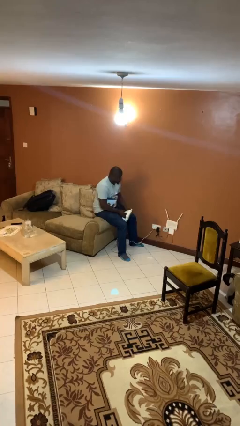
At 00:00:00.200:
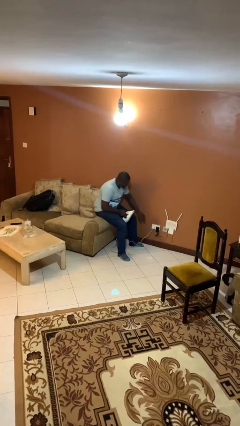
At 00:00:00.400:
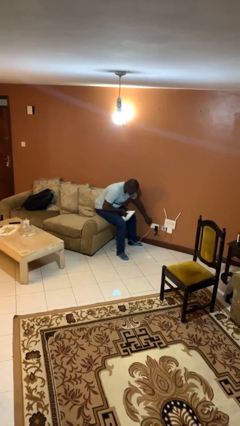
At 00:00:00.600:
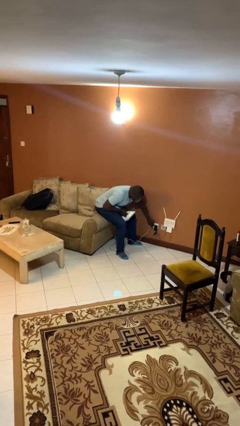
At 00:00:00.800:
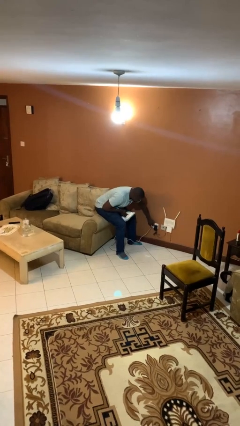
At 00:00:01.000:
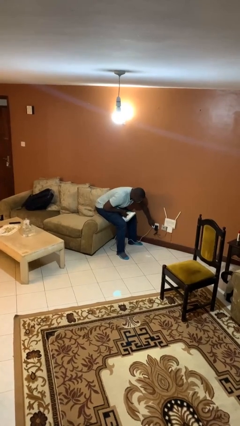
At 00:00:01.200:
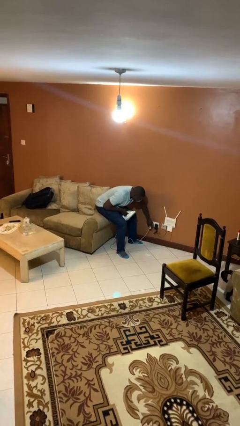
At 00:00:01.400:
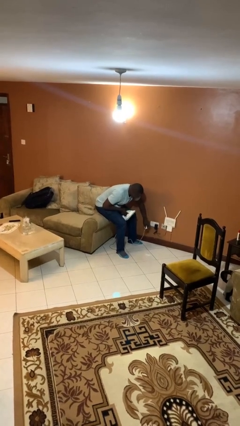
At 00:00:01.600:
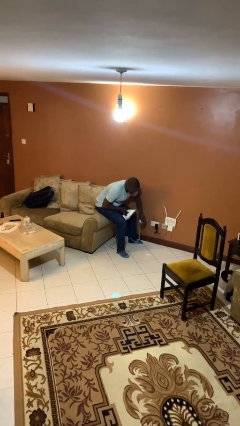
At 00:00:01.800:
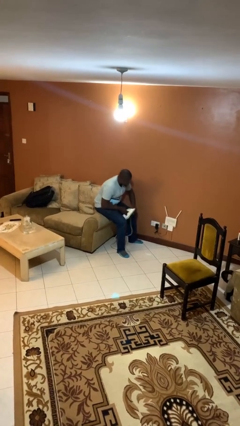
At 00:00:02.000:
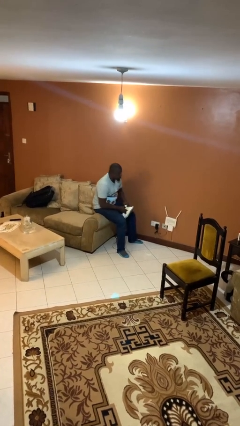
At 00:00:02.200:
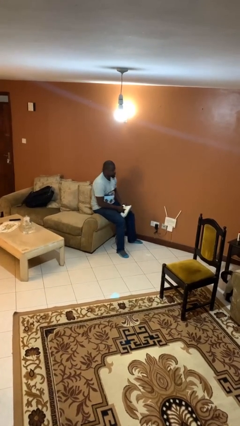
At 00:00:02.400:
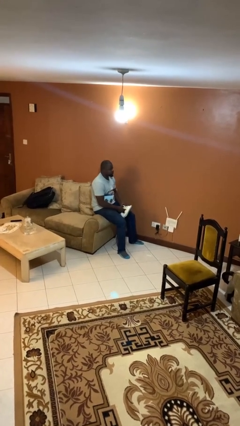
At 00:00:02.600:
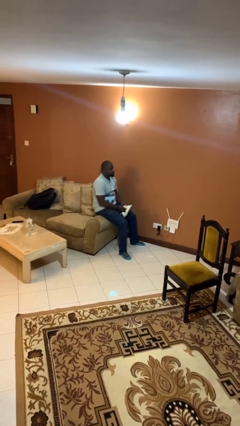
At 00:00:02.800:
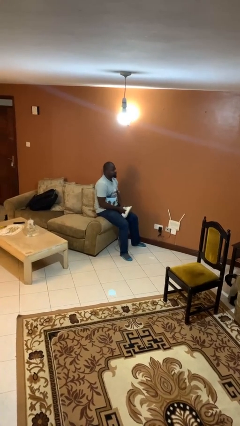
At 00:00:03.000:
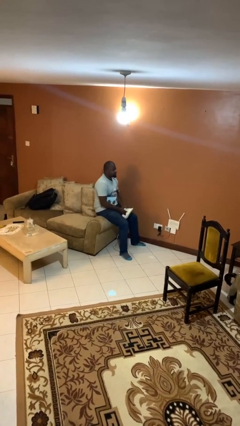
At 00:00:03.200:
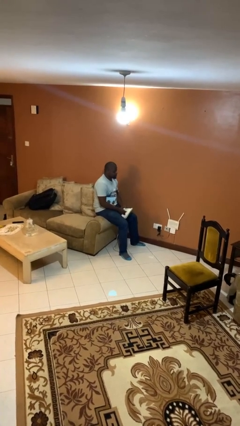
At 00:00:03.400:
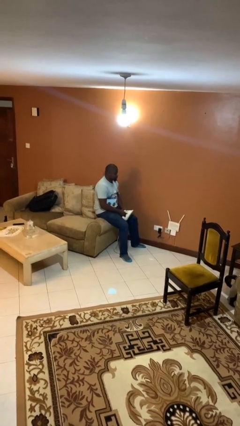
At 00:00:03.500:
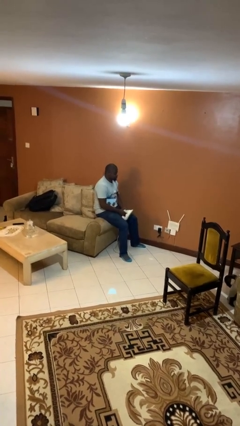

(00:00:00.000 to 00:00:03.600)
person unplugs from electrical socket

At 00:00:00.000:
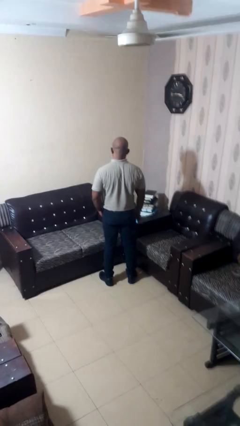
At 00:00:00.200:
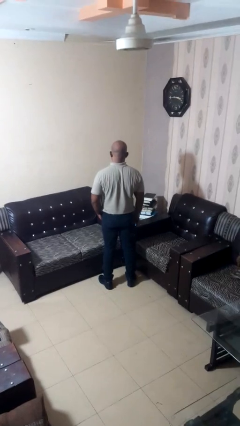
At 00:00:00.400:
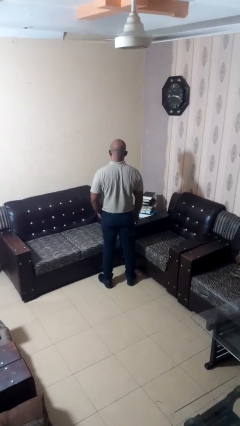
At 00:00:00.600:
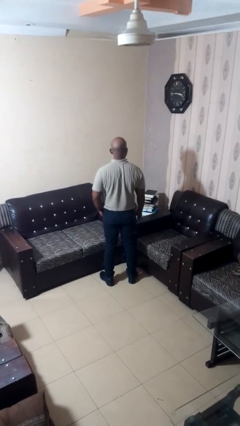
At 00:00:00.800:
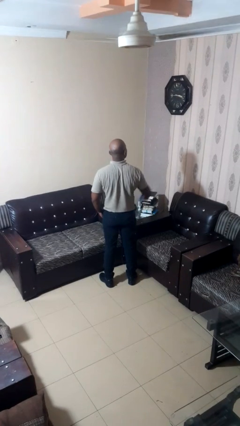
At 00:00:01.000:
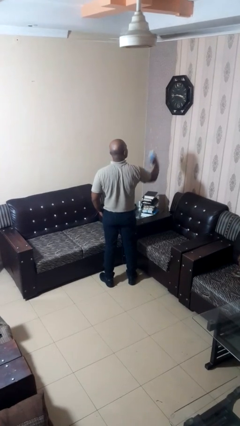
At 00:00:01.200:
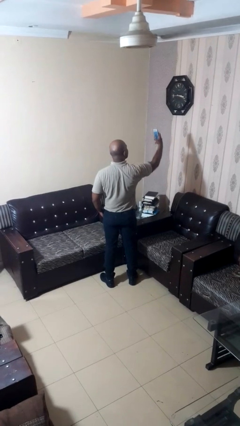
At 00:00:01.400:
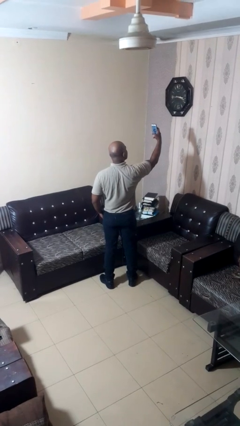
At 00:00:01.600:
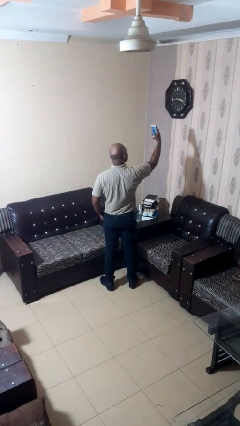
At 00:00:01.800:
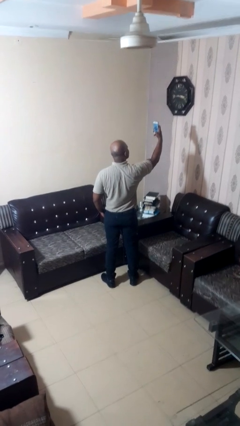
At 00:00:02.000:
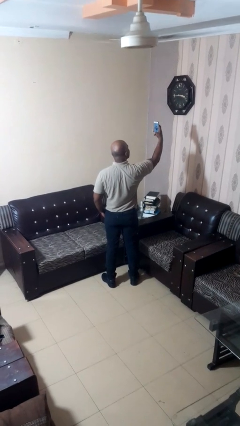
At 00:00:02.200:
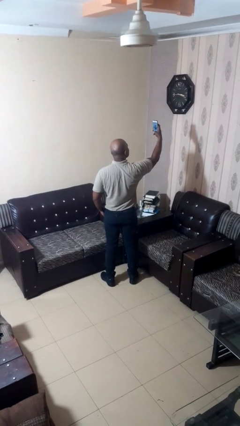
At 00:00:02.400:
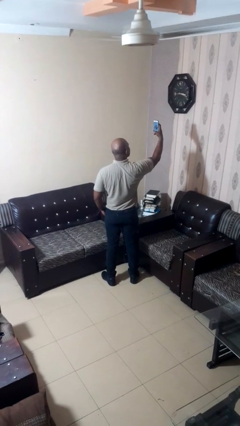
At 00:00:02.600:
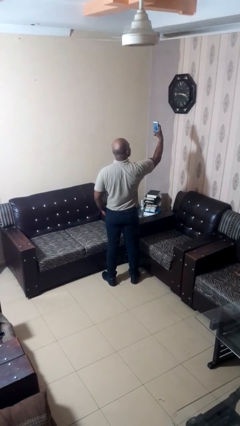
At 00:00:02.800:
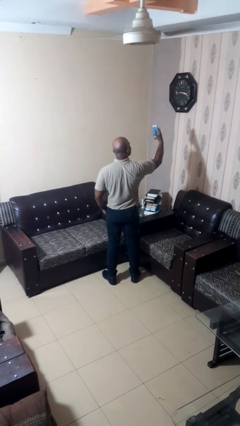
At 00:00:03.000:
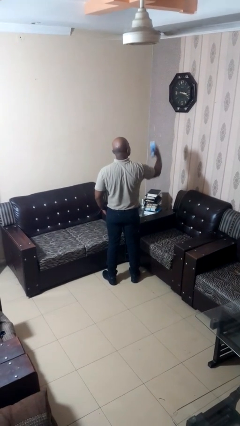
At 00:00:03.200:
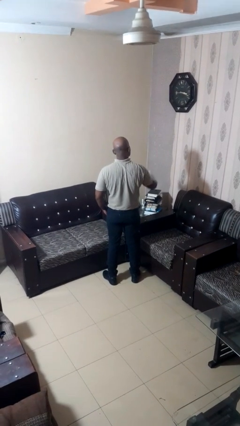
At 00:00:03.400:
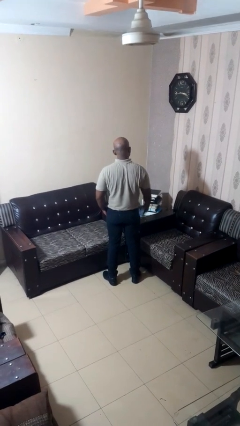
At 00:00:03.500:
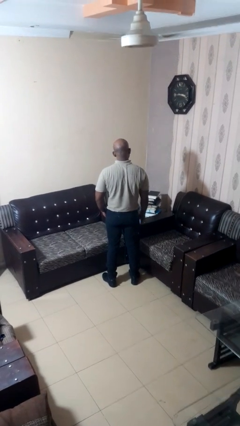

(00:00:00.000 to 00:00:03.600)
person takes selfie

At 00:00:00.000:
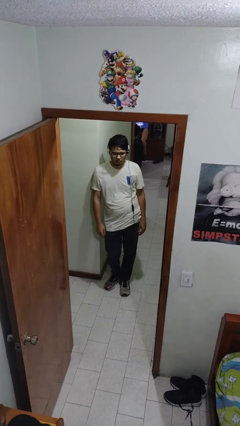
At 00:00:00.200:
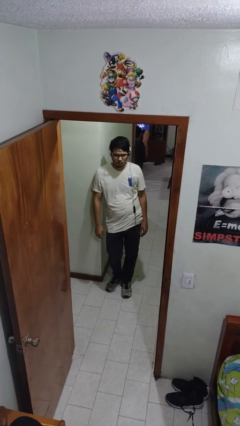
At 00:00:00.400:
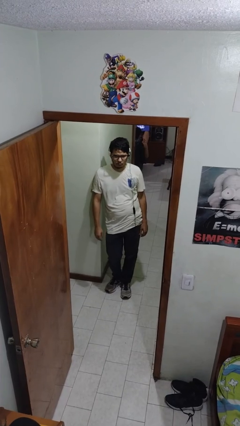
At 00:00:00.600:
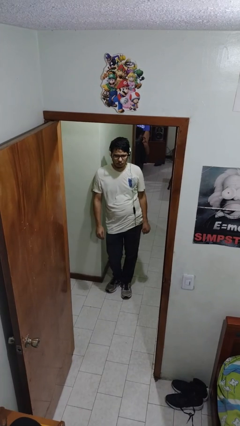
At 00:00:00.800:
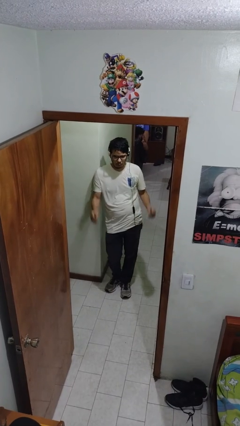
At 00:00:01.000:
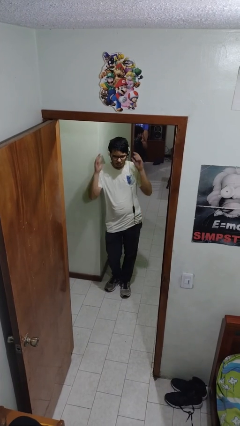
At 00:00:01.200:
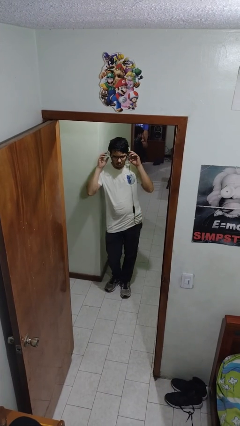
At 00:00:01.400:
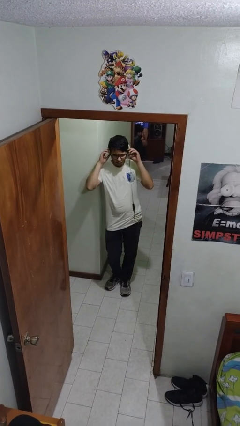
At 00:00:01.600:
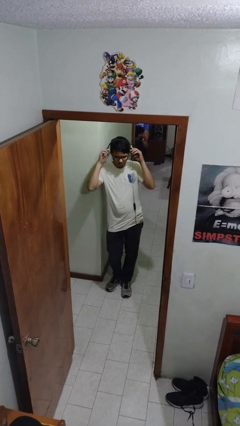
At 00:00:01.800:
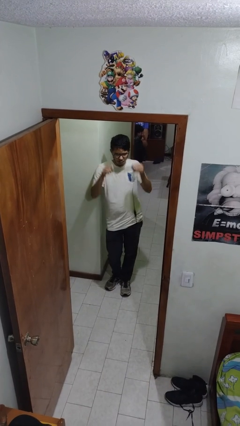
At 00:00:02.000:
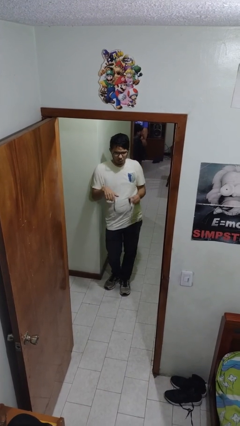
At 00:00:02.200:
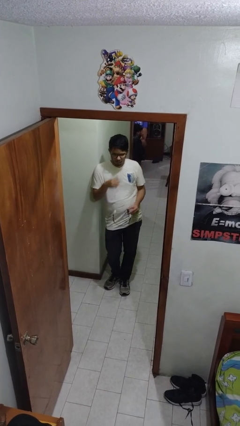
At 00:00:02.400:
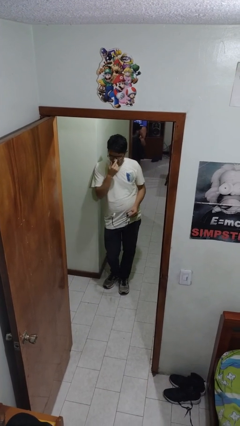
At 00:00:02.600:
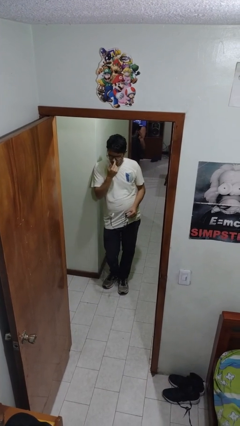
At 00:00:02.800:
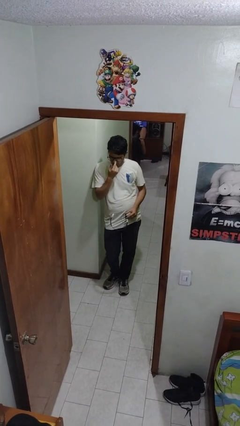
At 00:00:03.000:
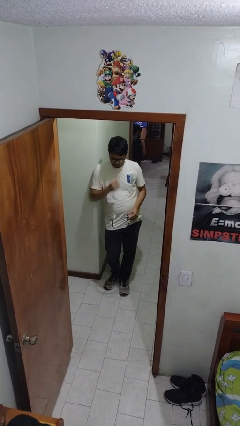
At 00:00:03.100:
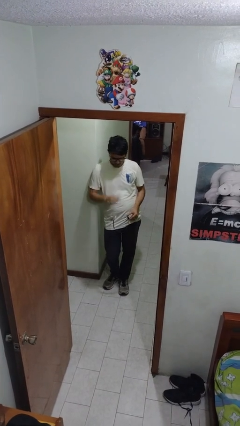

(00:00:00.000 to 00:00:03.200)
person takes off headphones

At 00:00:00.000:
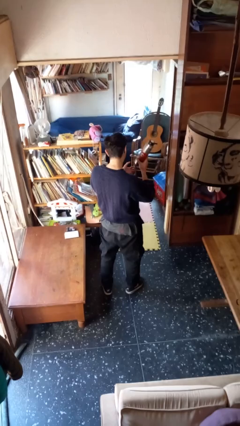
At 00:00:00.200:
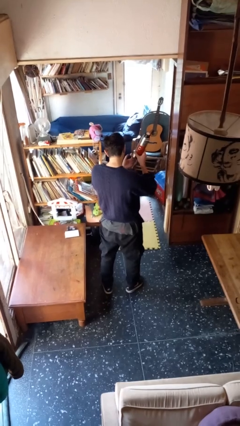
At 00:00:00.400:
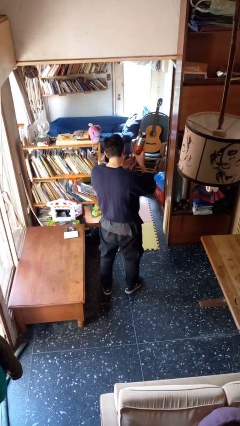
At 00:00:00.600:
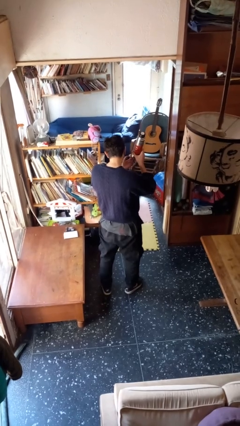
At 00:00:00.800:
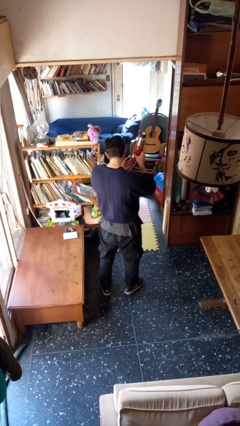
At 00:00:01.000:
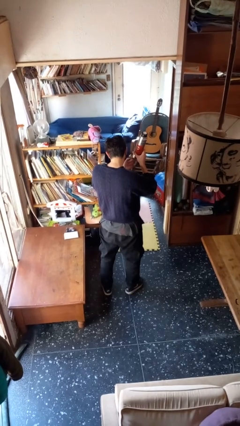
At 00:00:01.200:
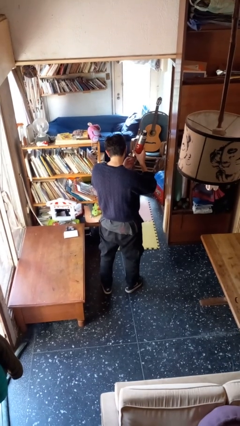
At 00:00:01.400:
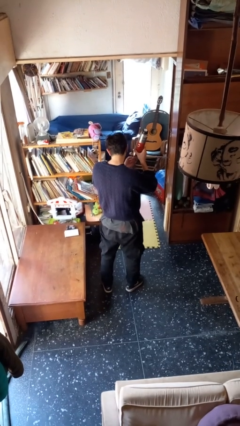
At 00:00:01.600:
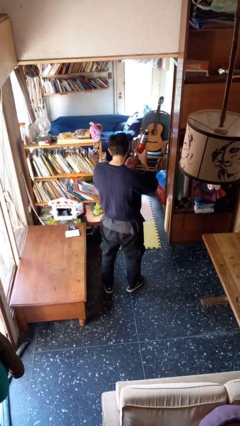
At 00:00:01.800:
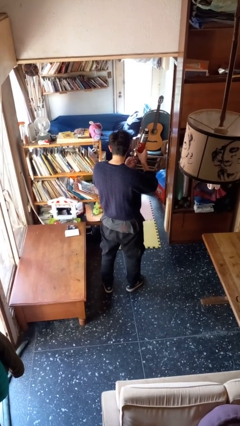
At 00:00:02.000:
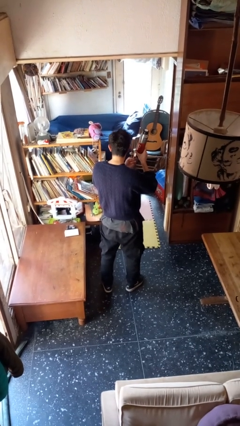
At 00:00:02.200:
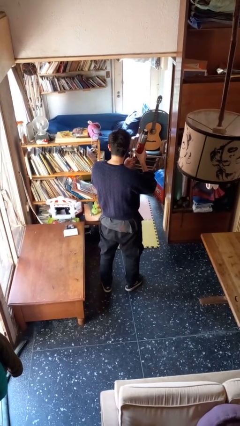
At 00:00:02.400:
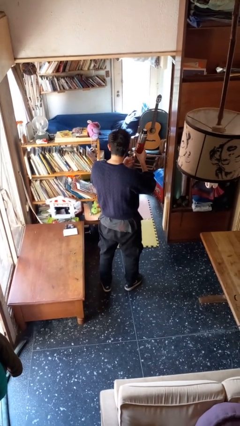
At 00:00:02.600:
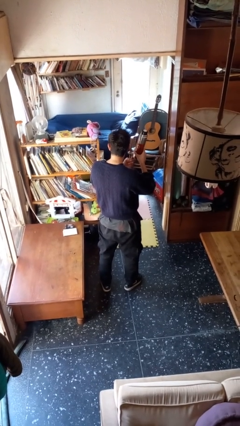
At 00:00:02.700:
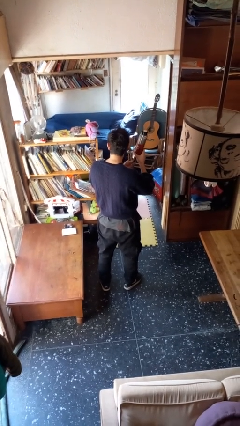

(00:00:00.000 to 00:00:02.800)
person taps object with finger

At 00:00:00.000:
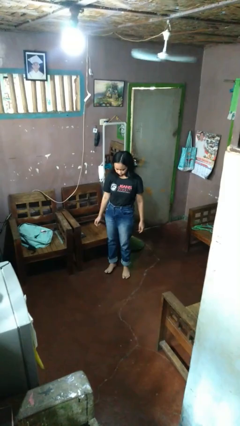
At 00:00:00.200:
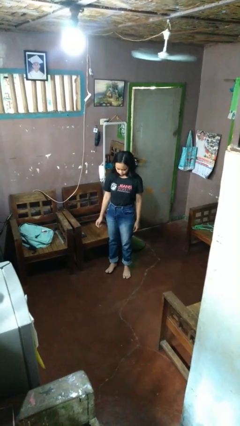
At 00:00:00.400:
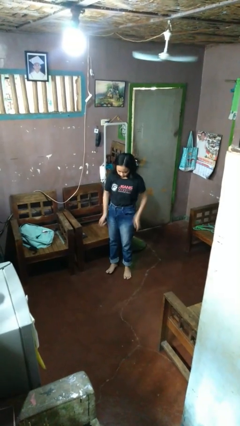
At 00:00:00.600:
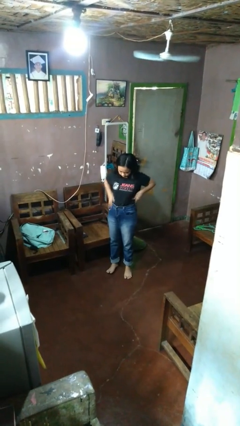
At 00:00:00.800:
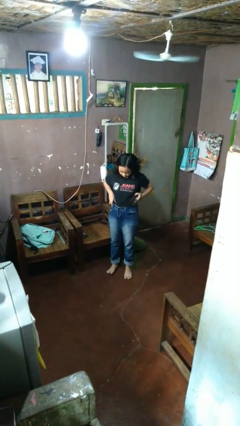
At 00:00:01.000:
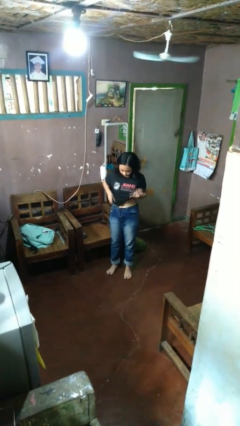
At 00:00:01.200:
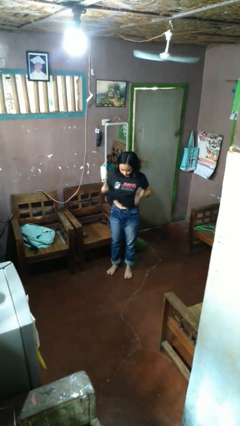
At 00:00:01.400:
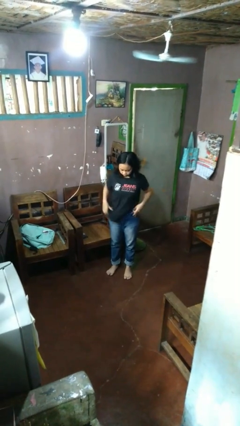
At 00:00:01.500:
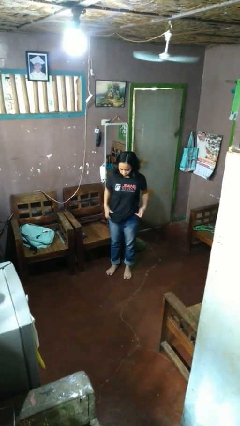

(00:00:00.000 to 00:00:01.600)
person untucks shirt

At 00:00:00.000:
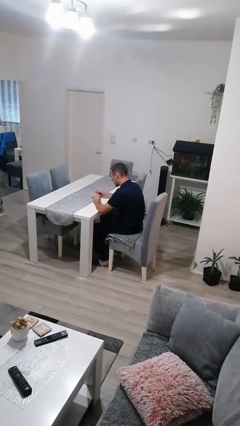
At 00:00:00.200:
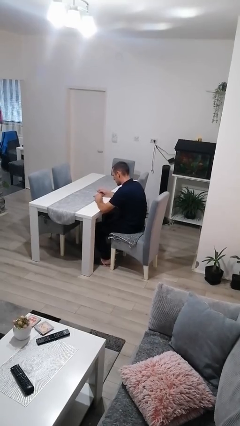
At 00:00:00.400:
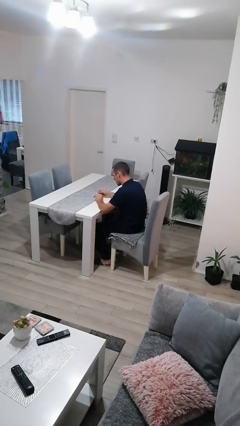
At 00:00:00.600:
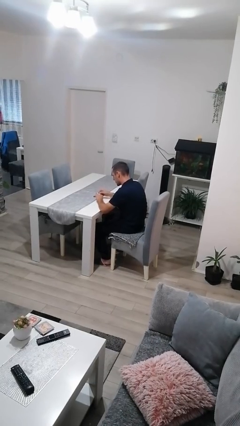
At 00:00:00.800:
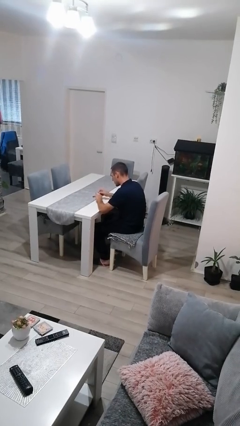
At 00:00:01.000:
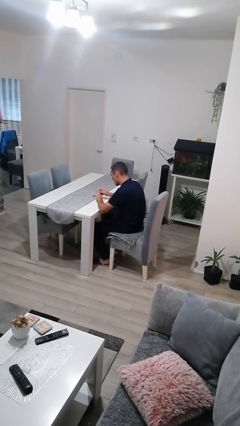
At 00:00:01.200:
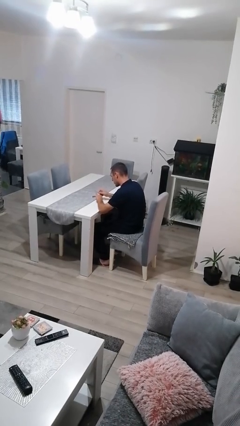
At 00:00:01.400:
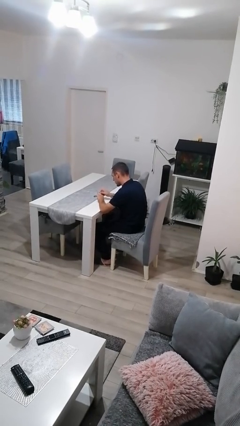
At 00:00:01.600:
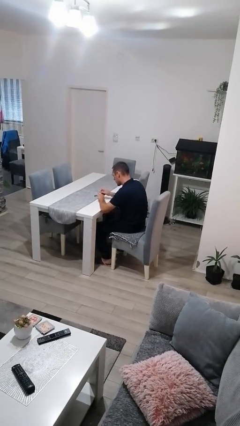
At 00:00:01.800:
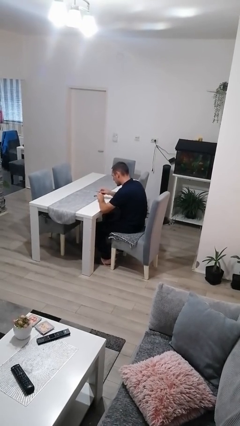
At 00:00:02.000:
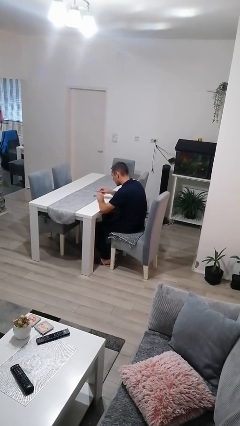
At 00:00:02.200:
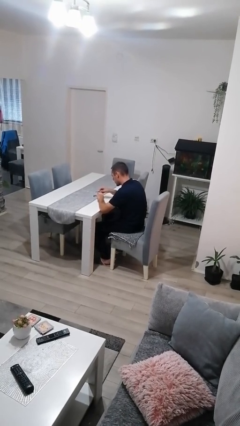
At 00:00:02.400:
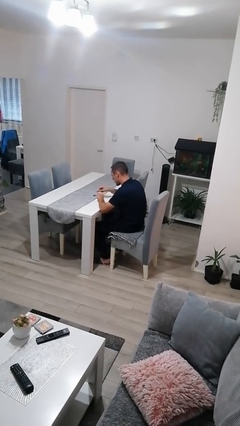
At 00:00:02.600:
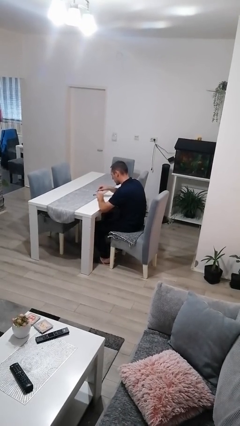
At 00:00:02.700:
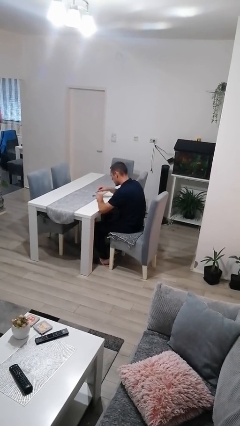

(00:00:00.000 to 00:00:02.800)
person files fingernails
